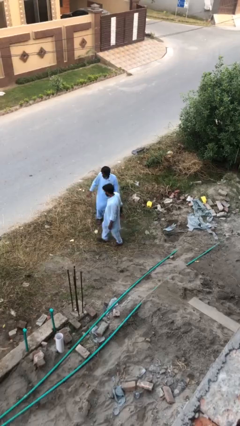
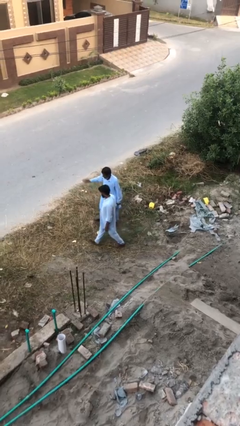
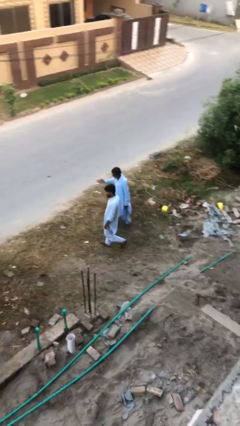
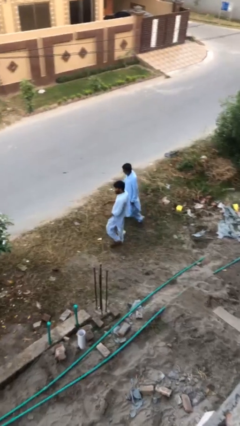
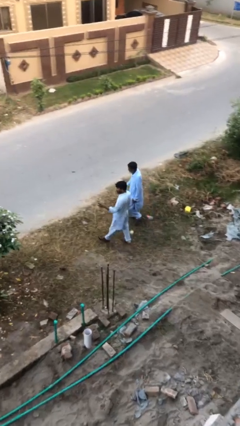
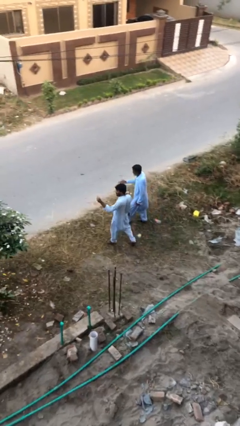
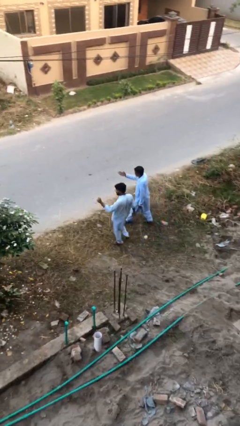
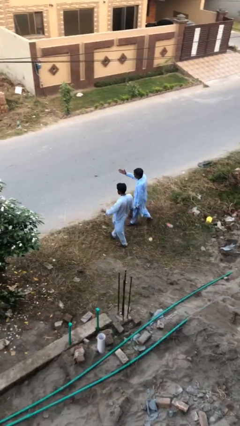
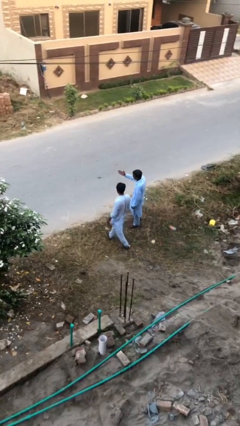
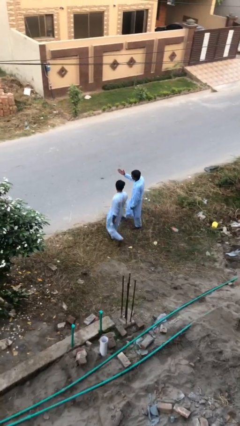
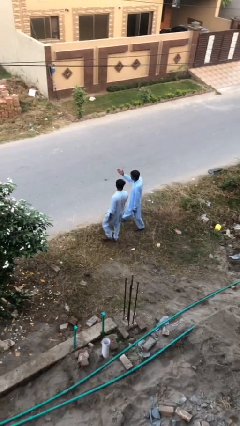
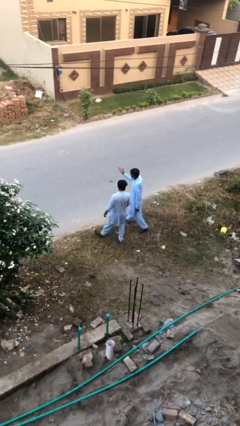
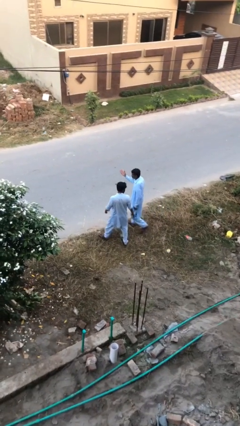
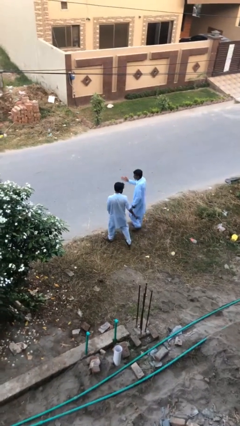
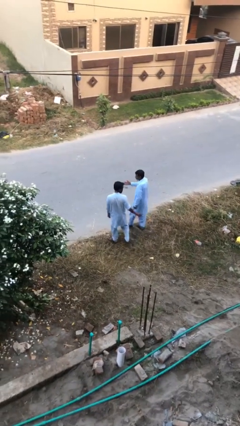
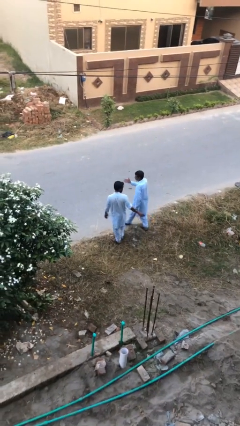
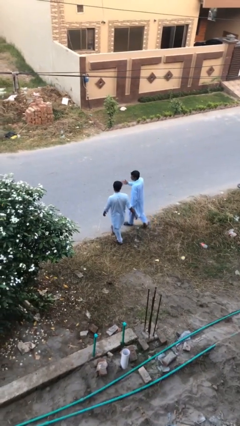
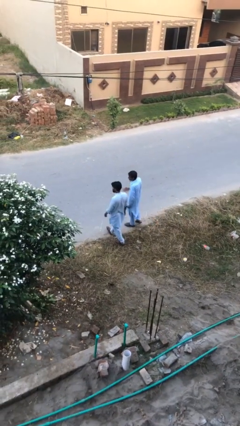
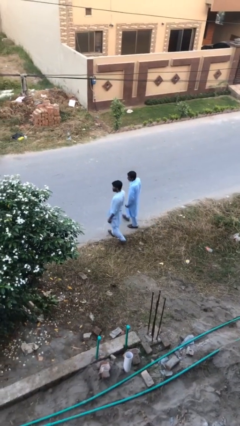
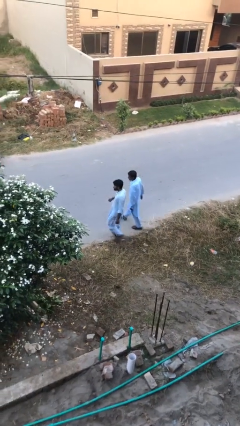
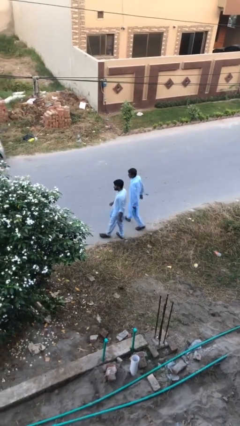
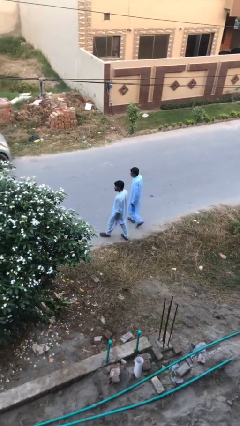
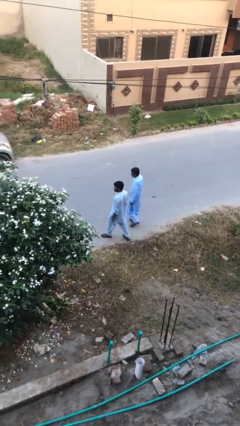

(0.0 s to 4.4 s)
person talks to person

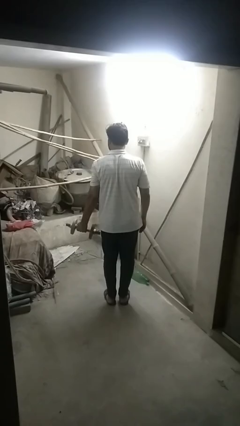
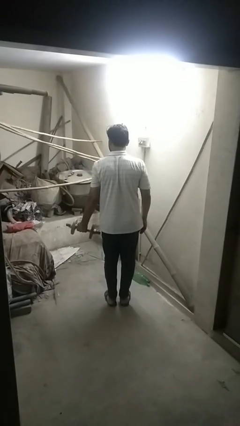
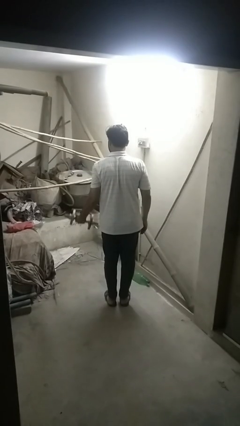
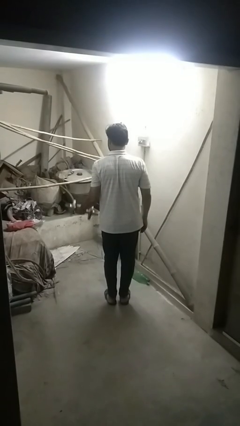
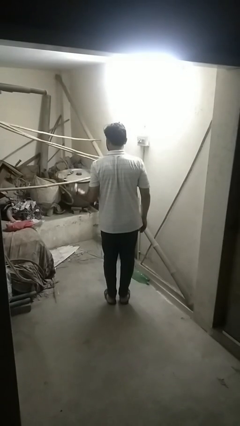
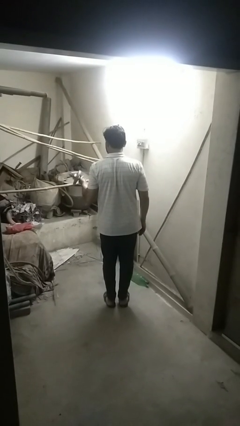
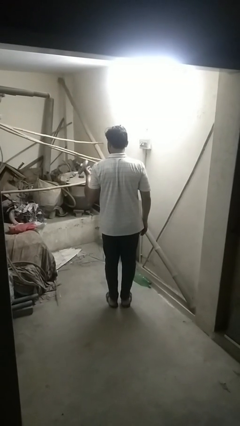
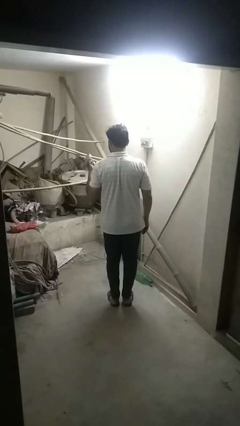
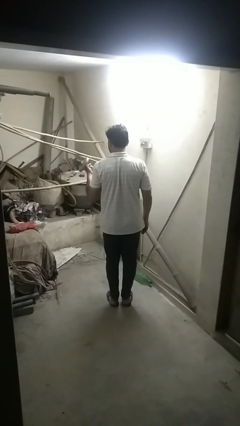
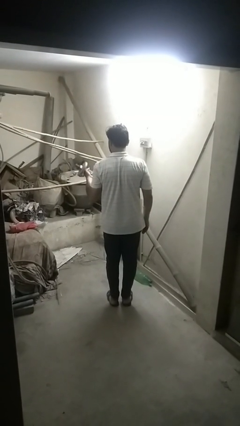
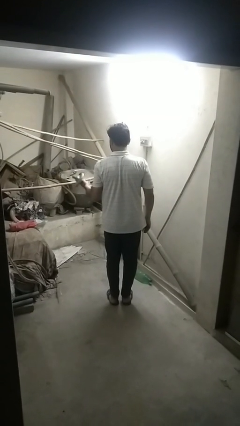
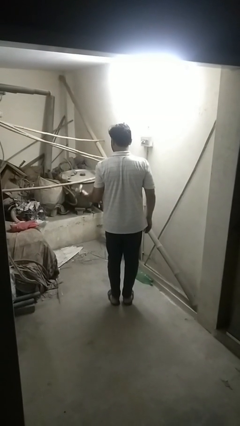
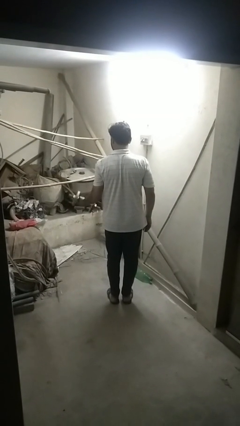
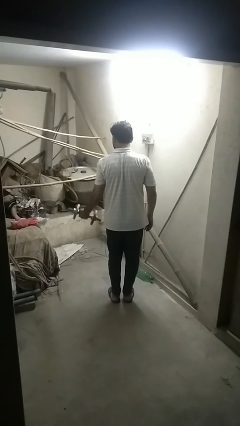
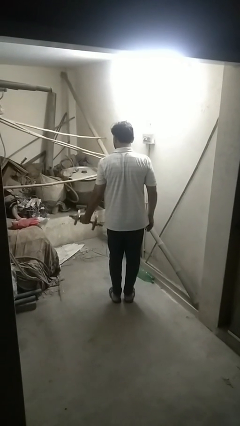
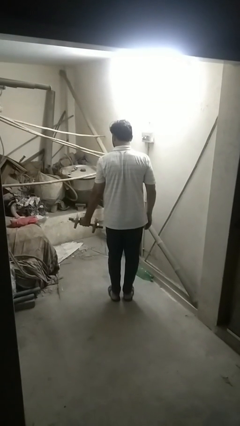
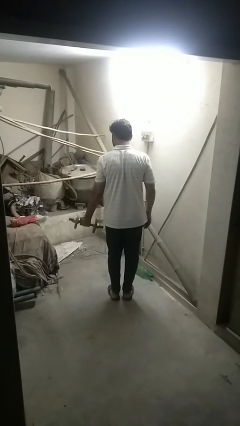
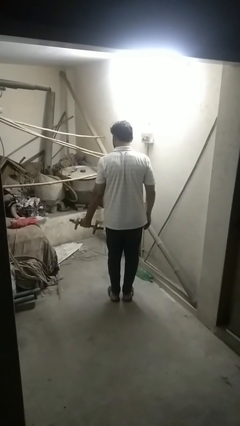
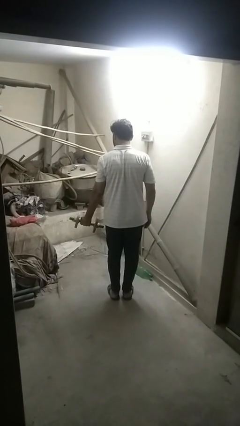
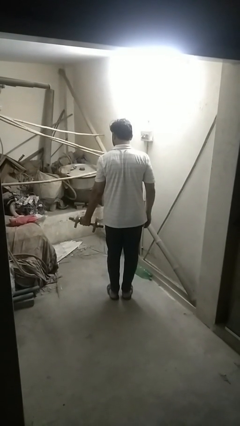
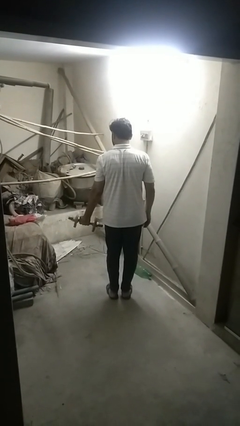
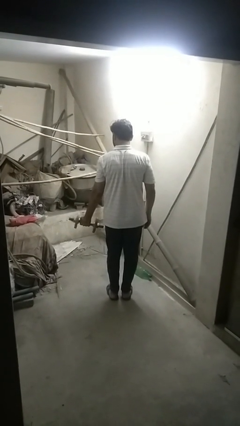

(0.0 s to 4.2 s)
person lifts dumbbells

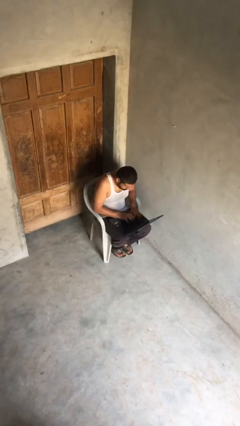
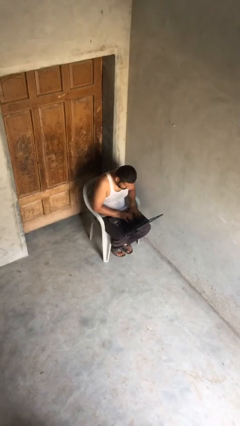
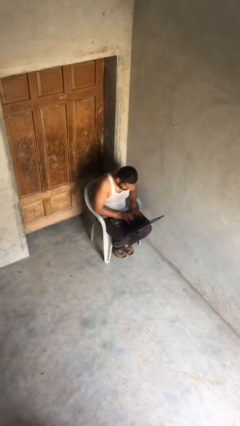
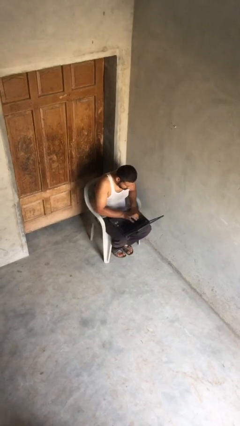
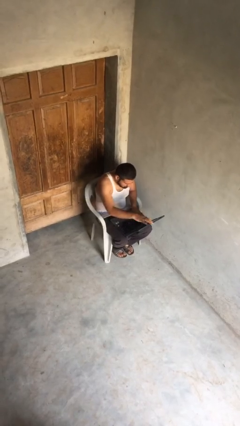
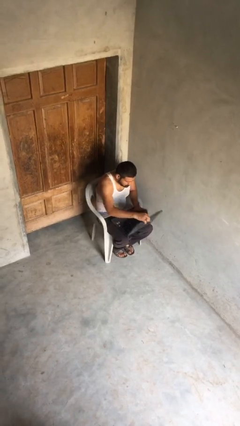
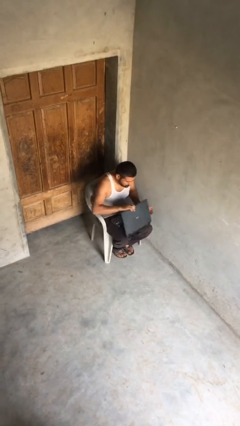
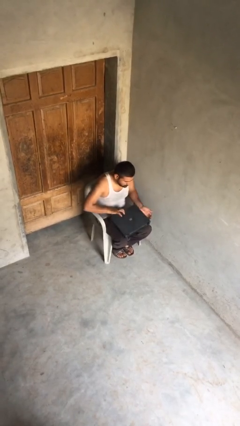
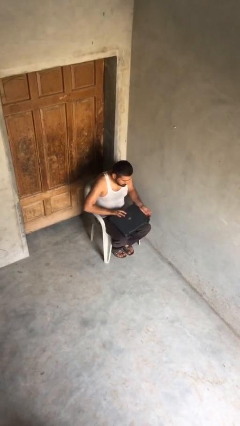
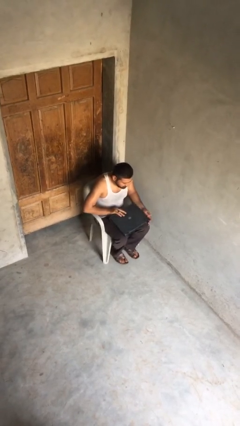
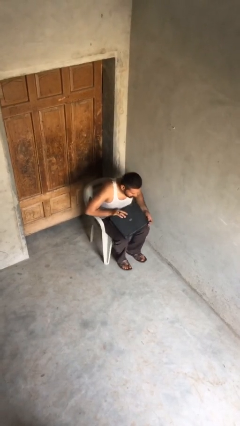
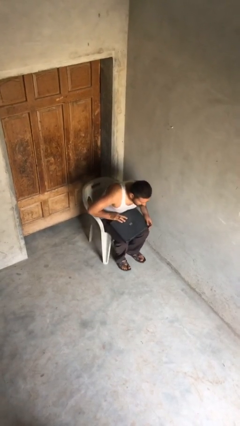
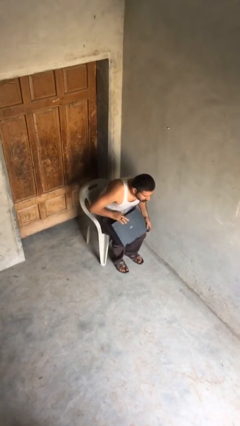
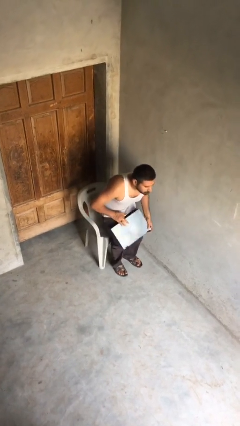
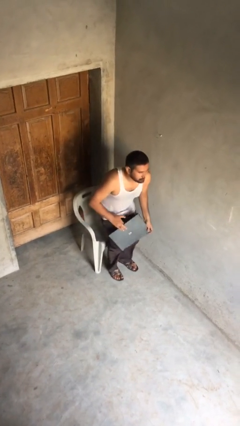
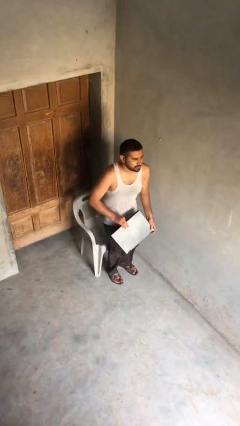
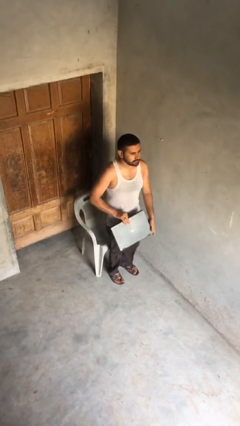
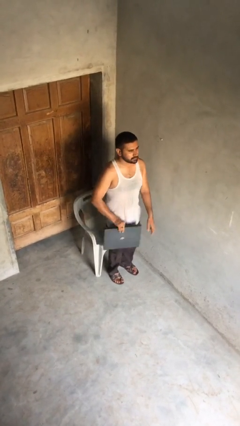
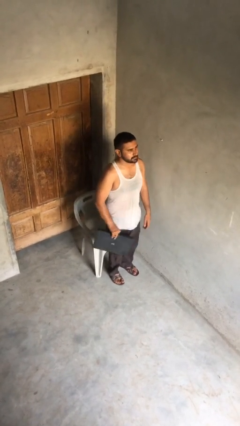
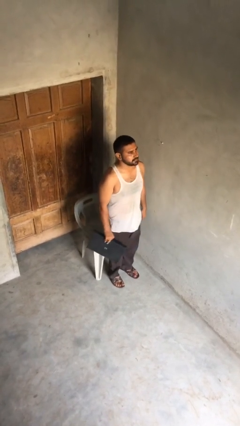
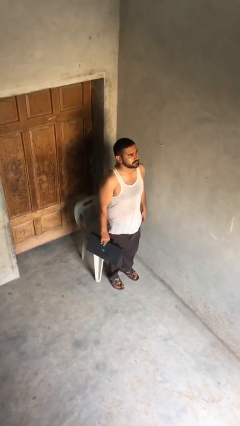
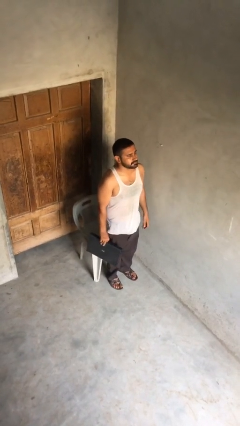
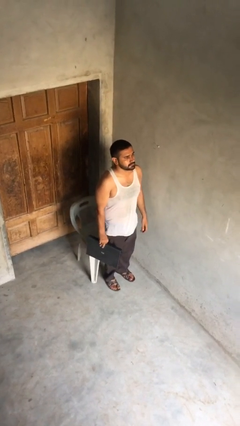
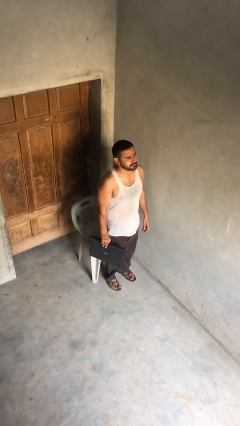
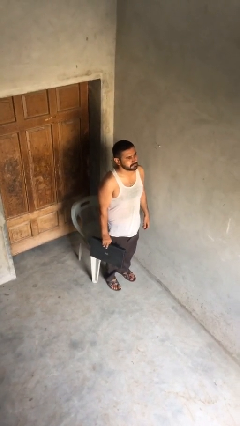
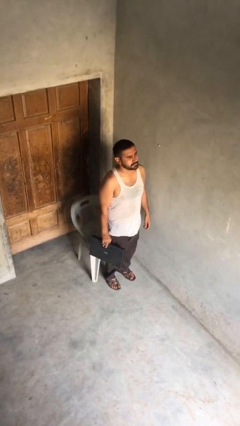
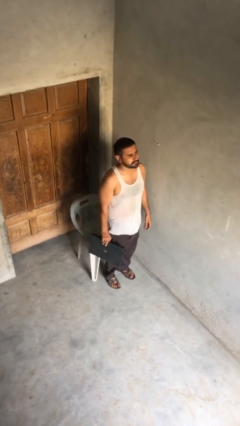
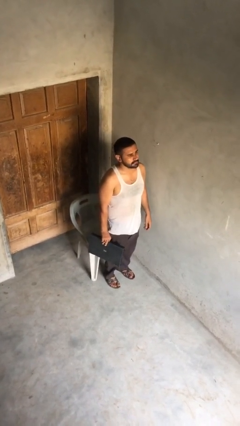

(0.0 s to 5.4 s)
person stands up

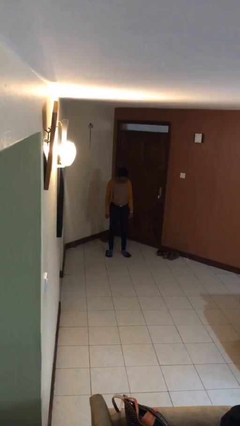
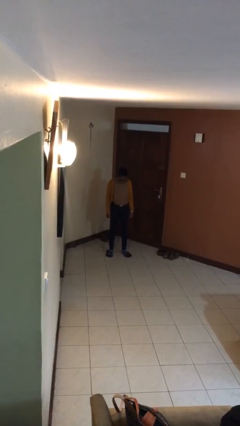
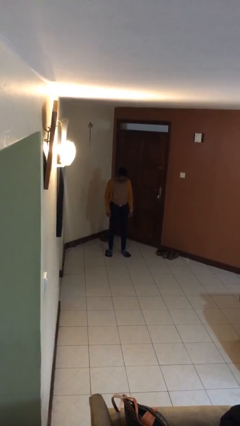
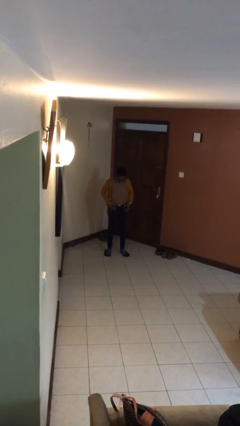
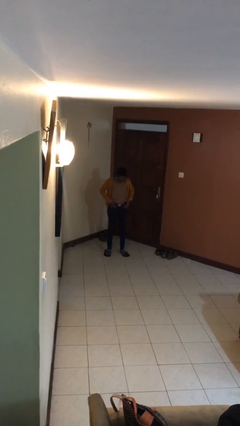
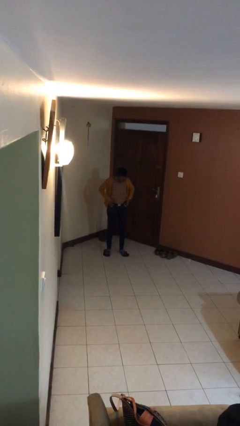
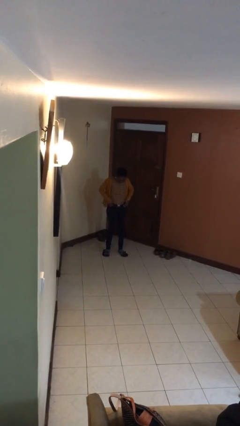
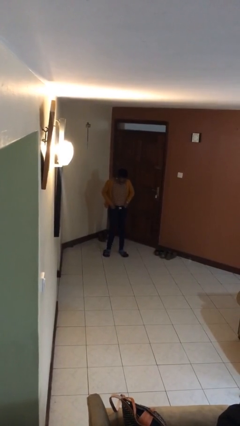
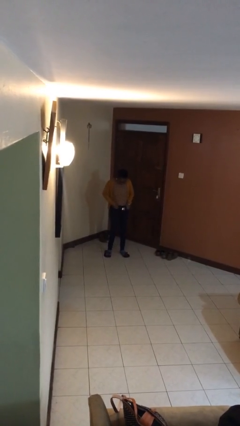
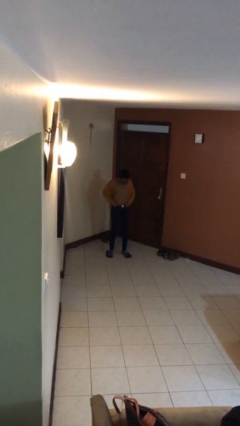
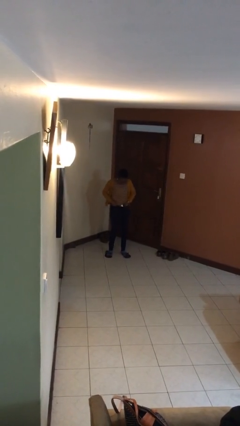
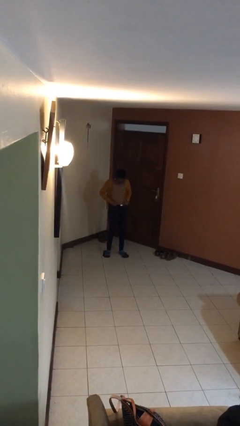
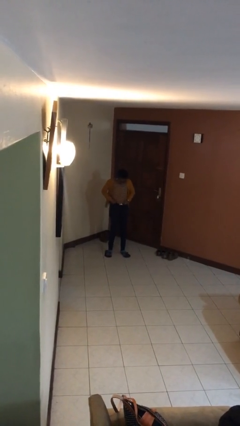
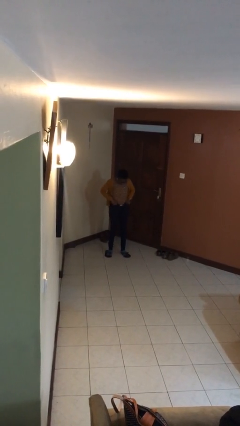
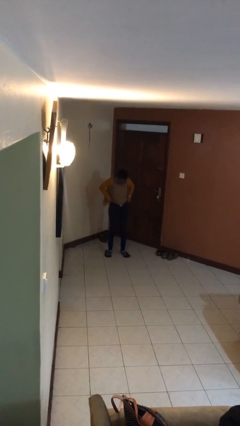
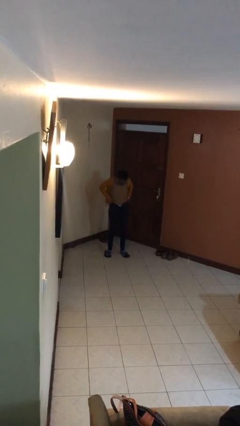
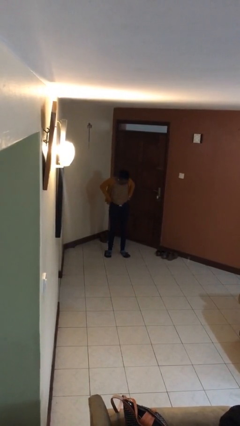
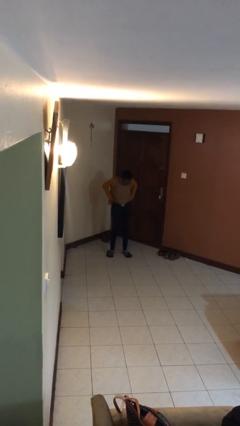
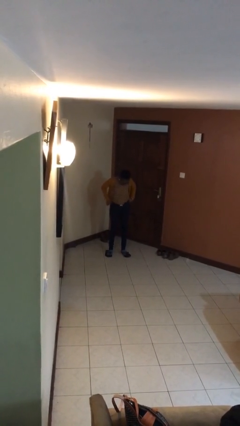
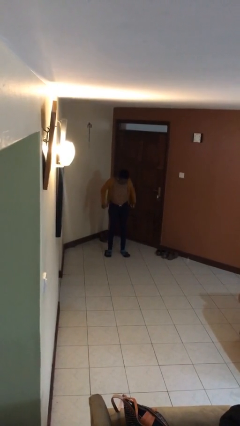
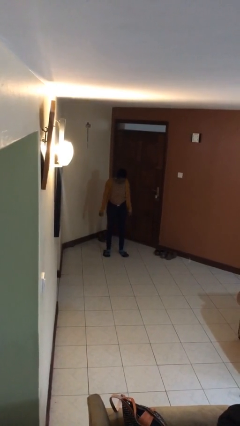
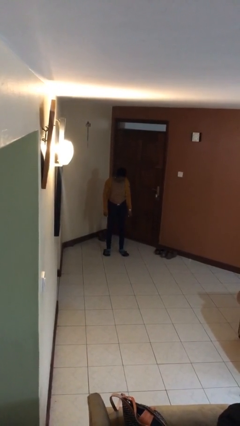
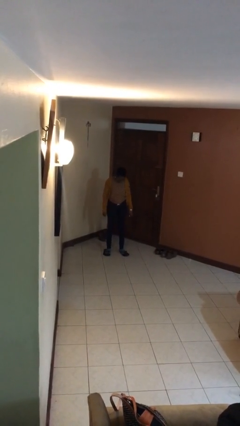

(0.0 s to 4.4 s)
person hikes up pants
